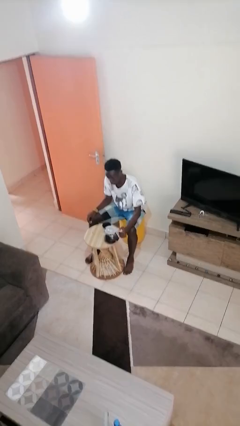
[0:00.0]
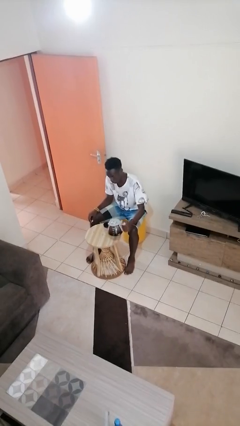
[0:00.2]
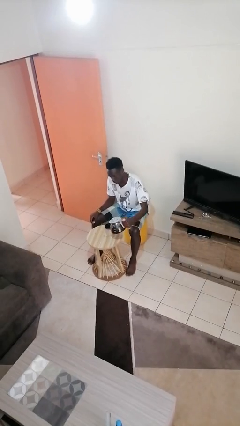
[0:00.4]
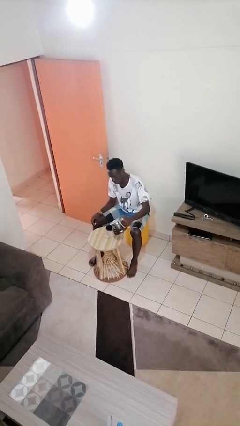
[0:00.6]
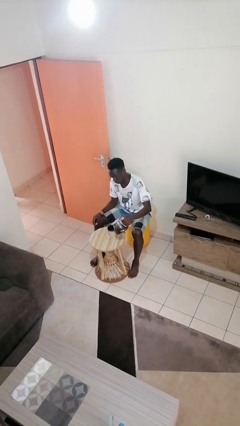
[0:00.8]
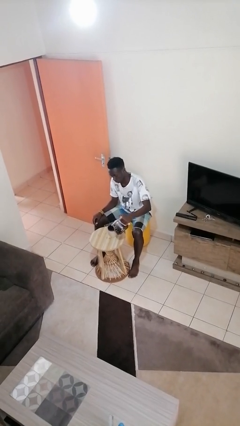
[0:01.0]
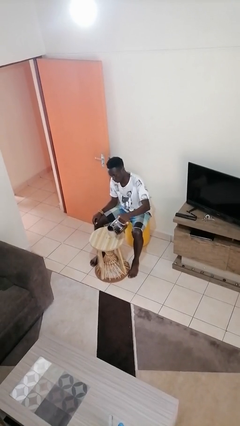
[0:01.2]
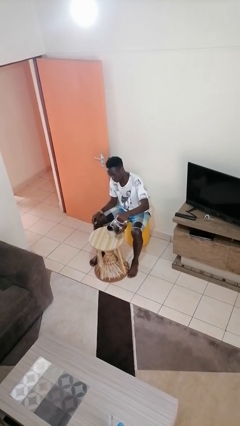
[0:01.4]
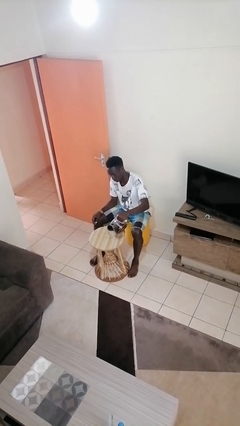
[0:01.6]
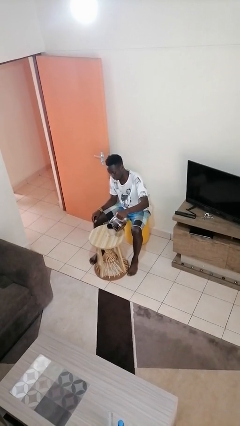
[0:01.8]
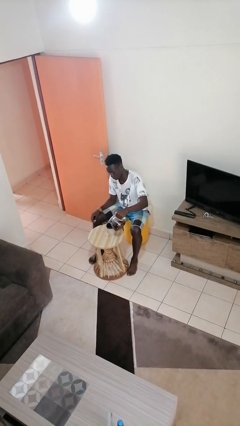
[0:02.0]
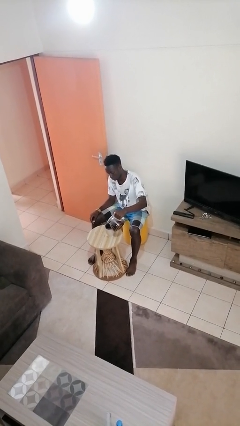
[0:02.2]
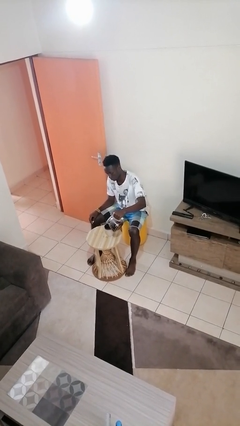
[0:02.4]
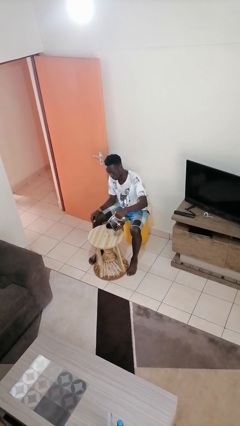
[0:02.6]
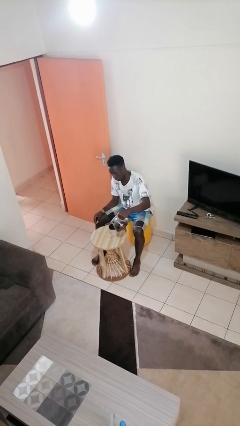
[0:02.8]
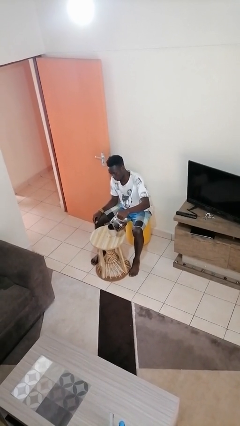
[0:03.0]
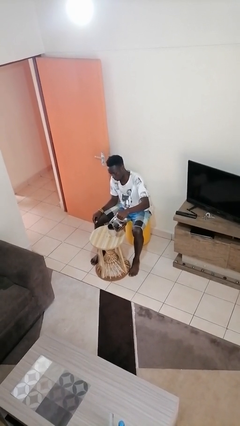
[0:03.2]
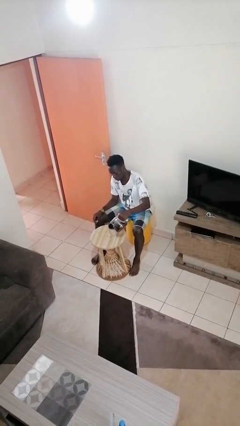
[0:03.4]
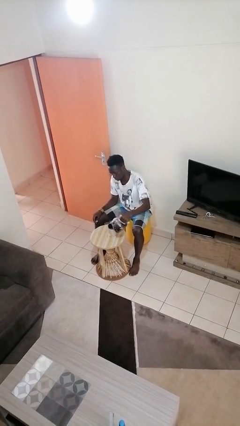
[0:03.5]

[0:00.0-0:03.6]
person pours coffee into mug

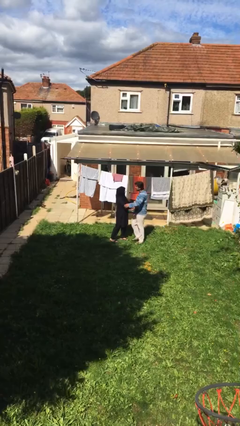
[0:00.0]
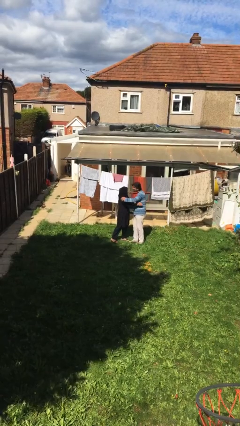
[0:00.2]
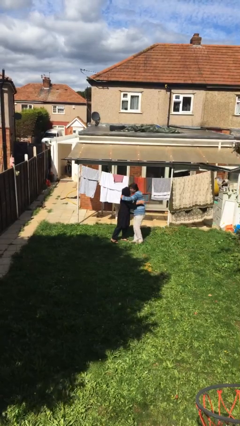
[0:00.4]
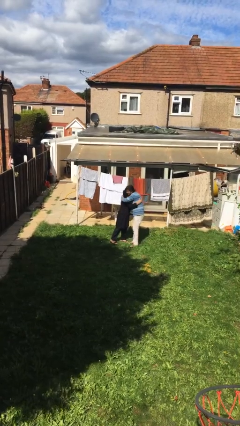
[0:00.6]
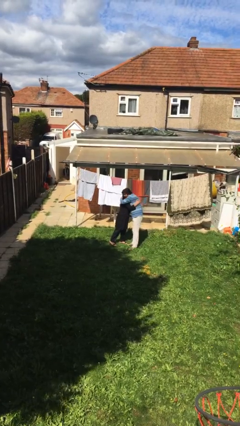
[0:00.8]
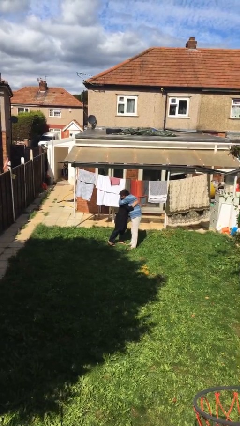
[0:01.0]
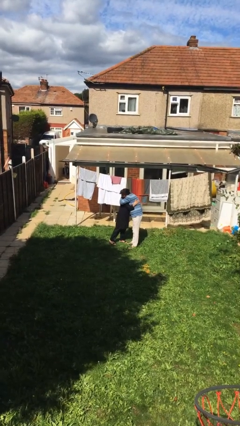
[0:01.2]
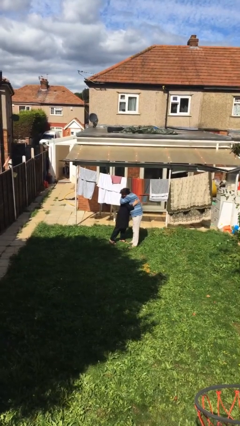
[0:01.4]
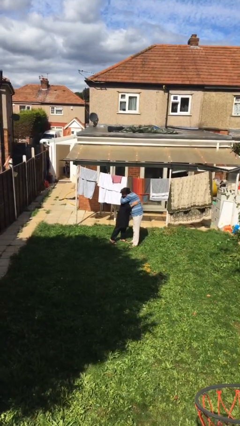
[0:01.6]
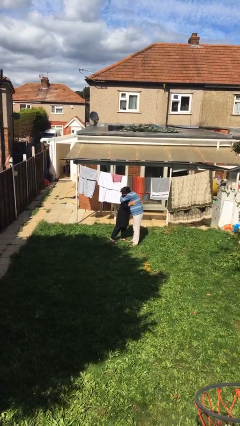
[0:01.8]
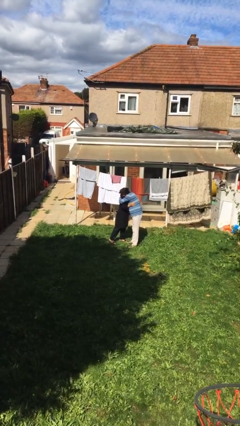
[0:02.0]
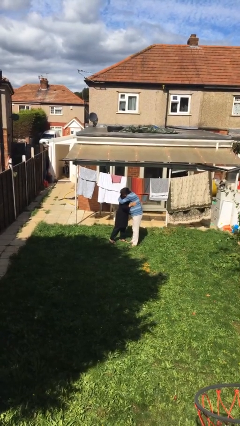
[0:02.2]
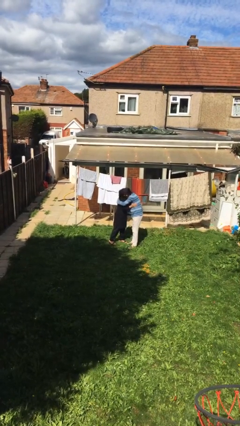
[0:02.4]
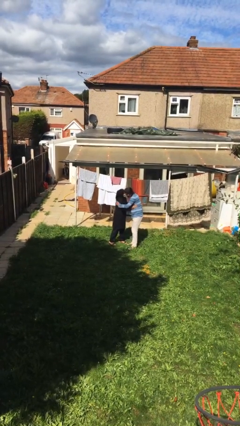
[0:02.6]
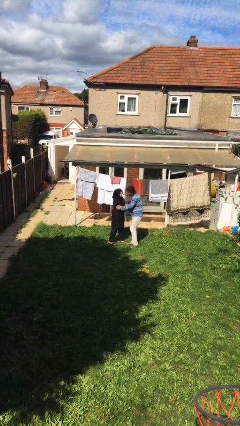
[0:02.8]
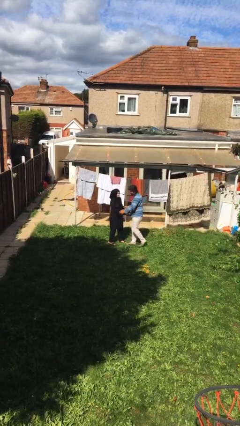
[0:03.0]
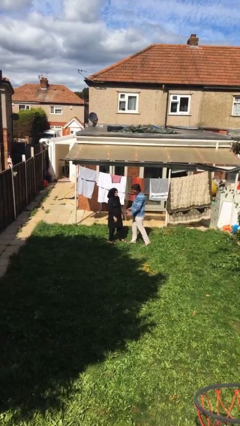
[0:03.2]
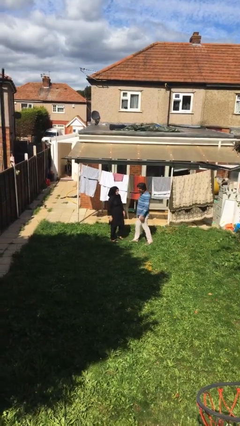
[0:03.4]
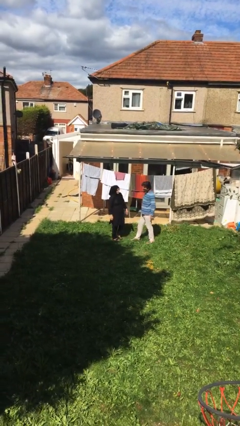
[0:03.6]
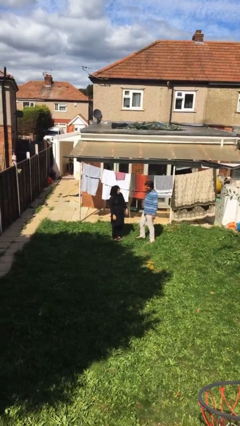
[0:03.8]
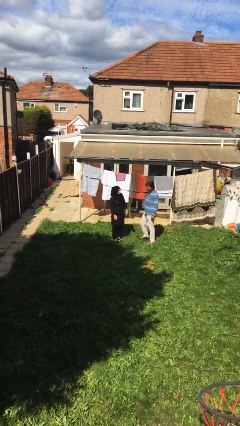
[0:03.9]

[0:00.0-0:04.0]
person embraces person

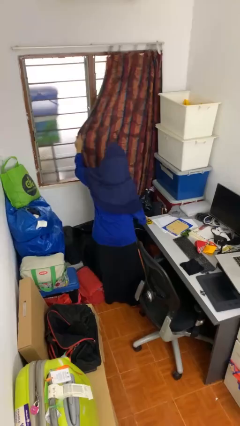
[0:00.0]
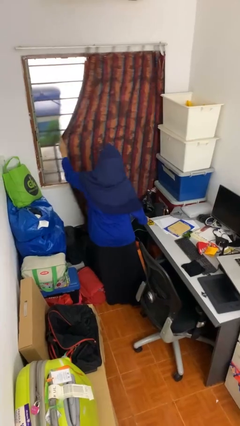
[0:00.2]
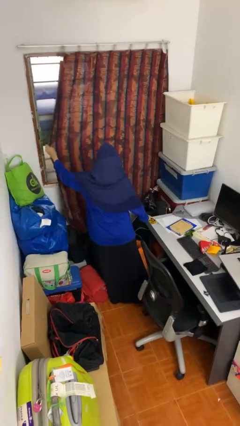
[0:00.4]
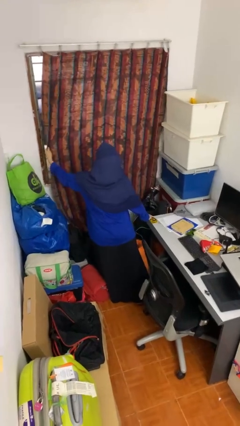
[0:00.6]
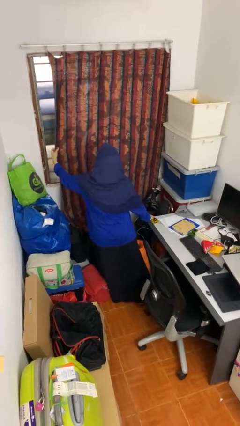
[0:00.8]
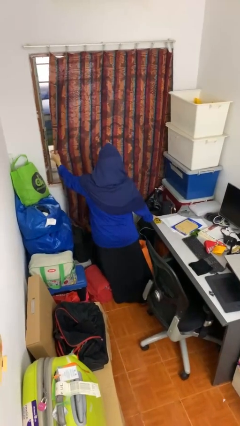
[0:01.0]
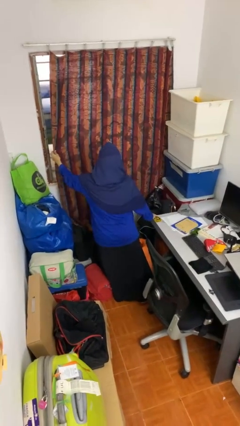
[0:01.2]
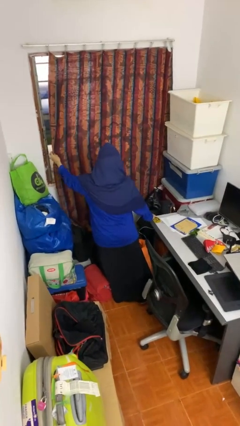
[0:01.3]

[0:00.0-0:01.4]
person closes curtains

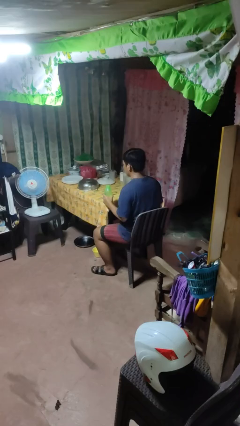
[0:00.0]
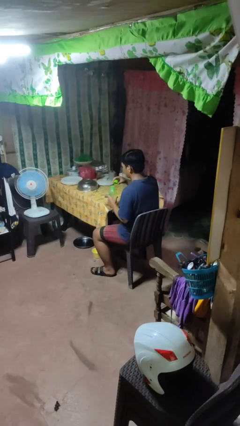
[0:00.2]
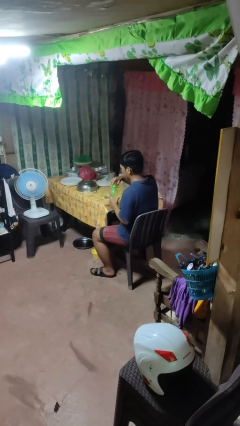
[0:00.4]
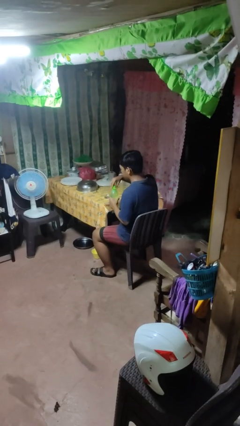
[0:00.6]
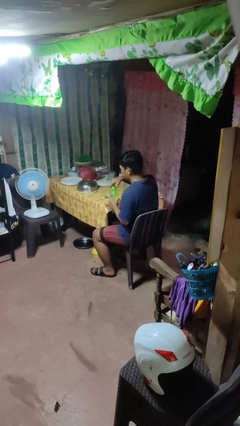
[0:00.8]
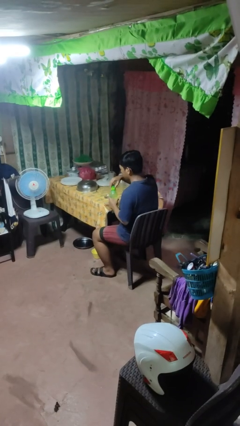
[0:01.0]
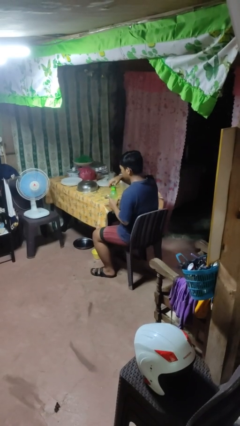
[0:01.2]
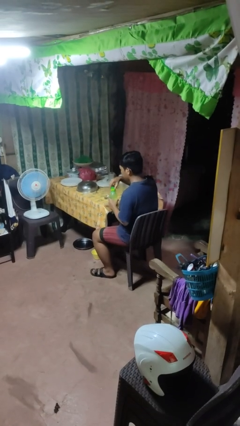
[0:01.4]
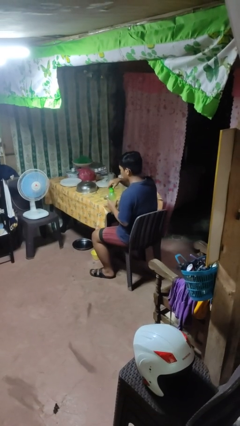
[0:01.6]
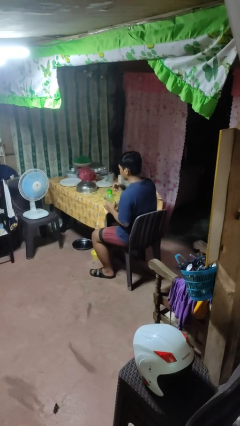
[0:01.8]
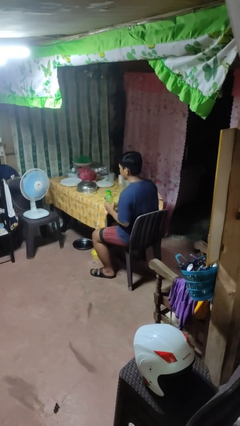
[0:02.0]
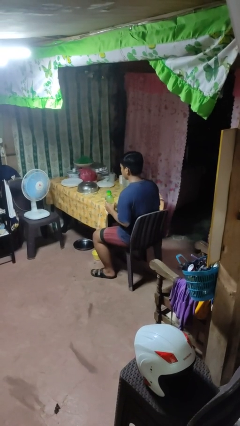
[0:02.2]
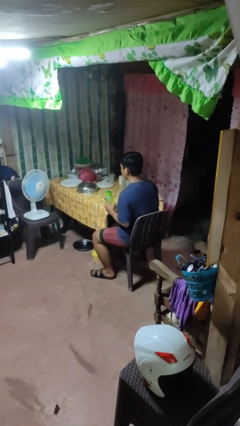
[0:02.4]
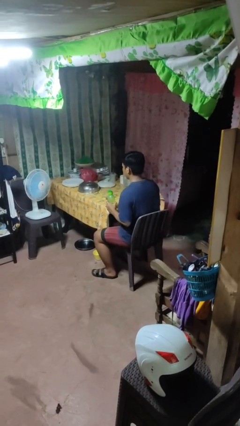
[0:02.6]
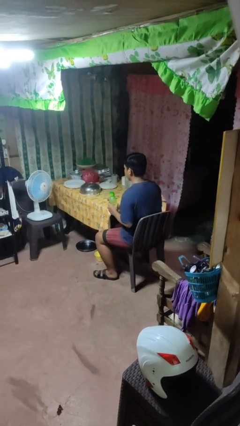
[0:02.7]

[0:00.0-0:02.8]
person screws lid to bottle

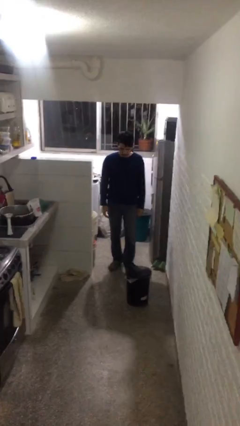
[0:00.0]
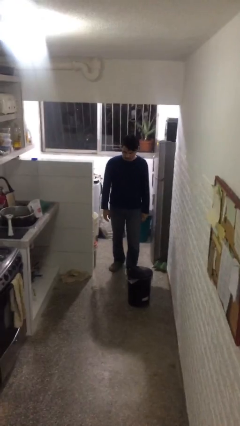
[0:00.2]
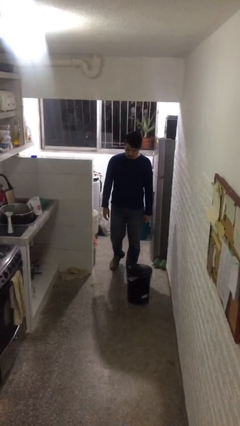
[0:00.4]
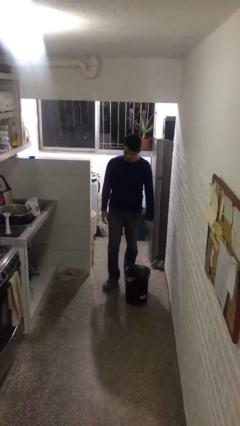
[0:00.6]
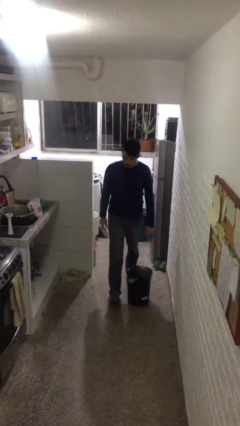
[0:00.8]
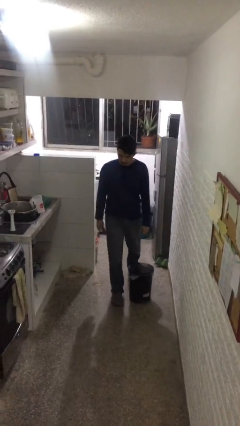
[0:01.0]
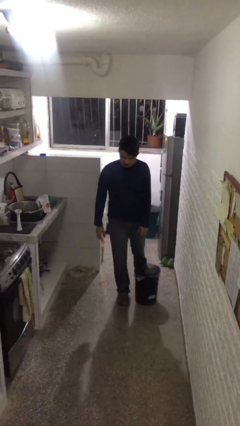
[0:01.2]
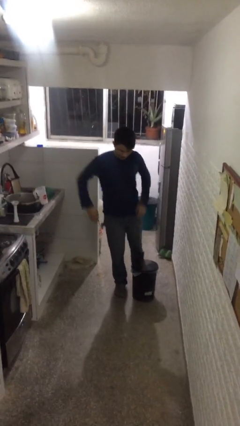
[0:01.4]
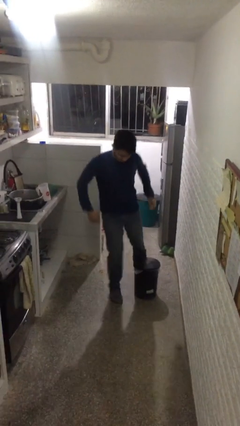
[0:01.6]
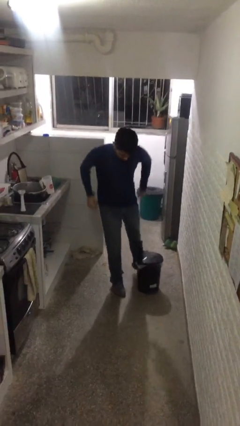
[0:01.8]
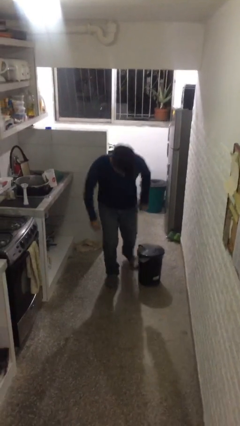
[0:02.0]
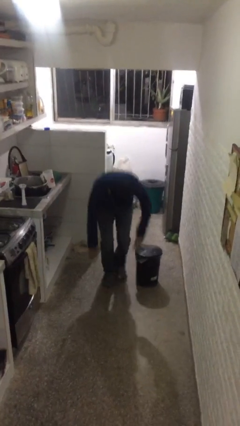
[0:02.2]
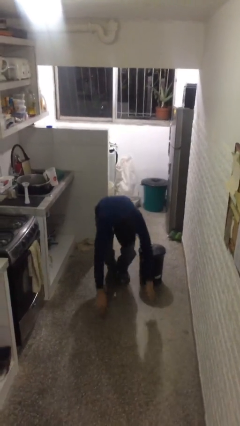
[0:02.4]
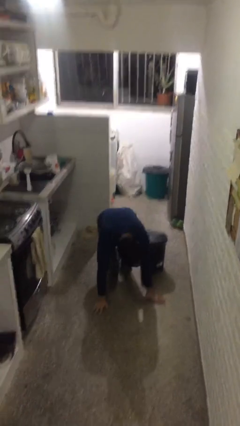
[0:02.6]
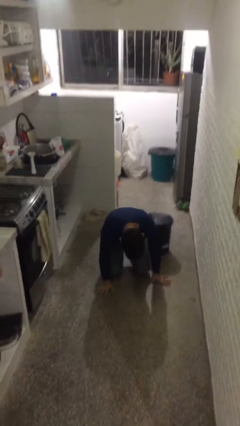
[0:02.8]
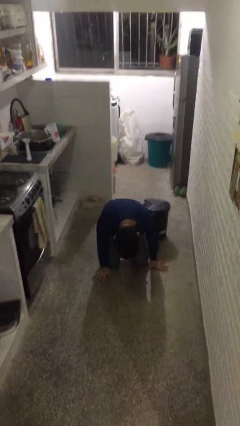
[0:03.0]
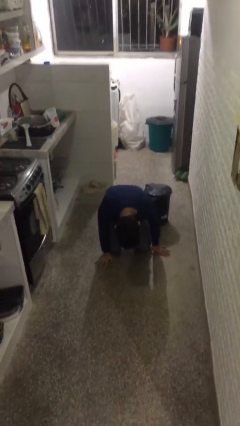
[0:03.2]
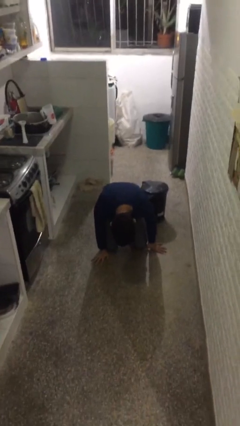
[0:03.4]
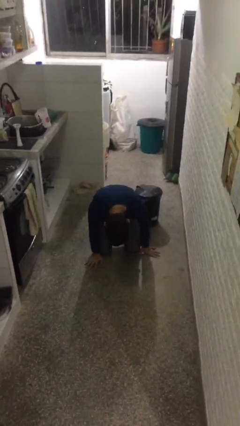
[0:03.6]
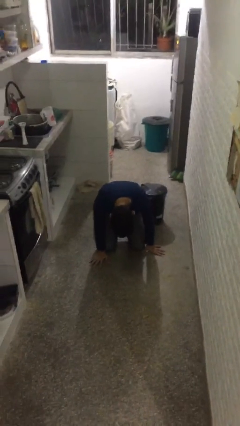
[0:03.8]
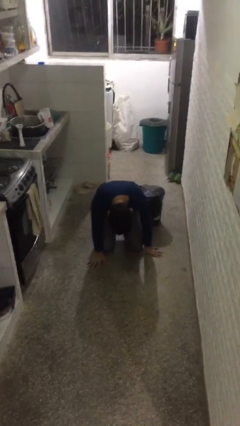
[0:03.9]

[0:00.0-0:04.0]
person trips on object on floor

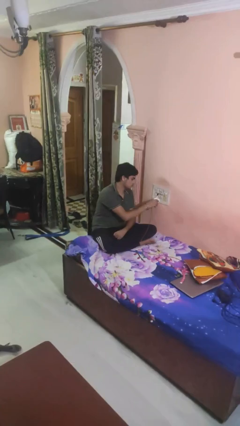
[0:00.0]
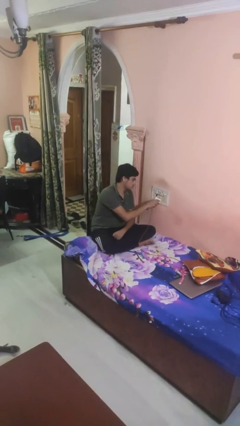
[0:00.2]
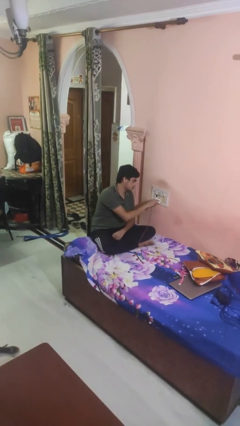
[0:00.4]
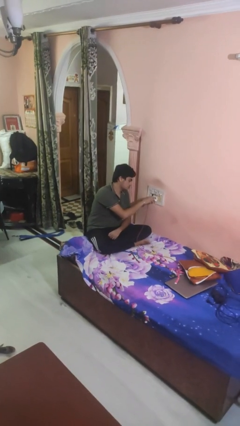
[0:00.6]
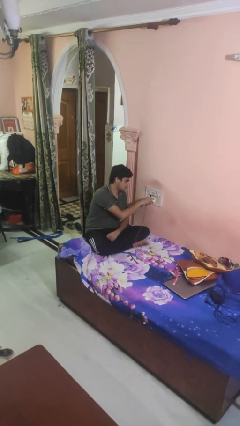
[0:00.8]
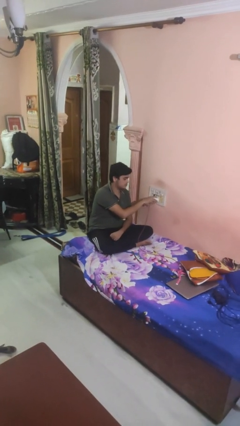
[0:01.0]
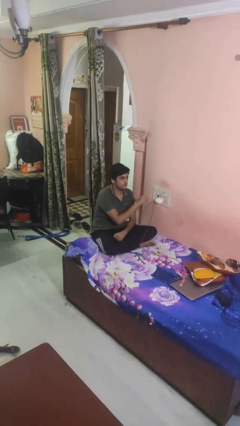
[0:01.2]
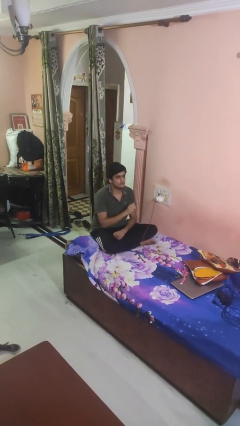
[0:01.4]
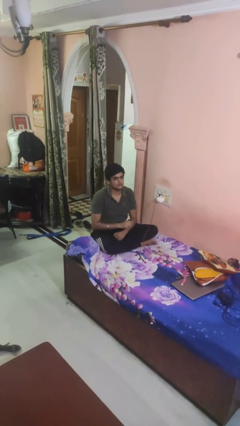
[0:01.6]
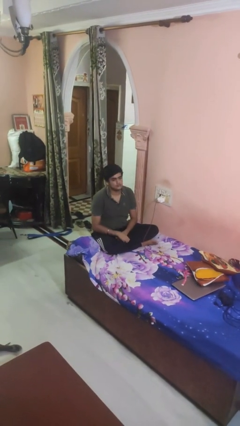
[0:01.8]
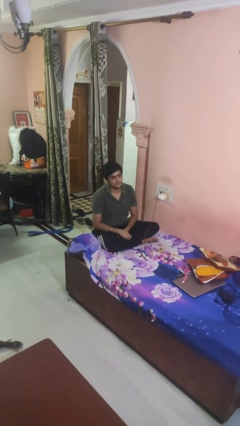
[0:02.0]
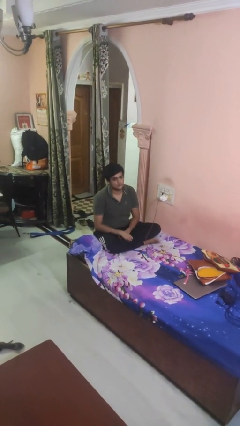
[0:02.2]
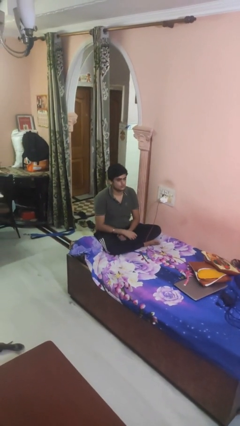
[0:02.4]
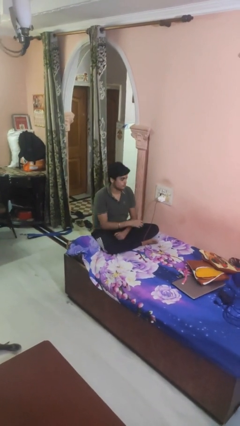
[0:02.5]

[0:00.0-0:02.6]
person plugs into electrical socket
